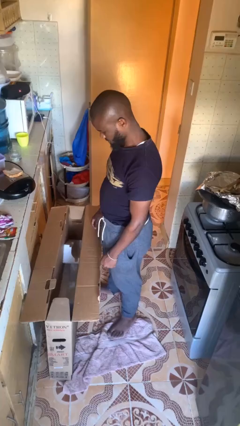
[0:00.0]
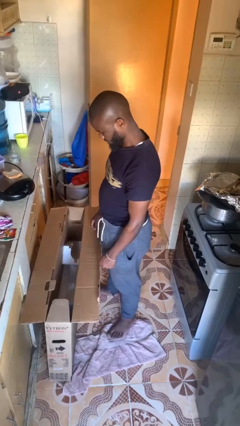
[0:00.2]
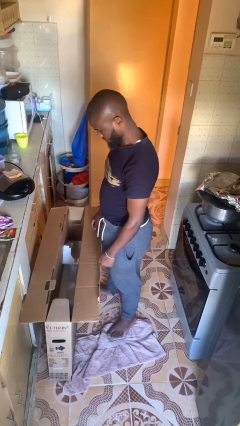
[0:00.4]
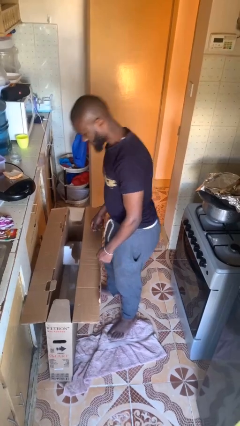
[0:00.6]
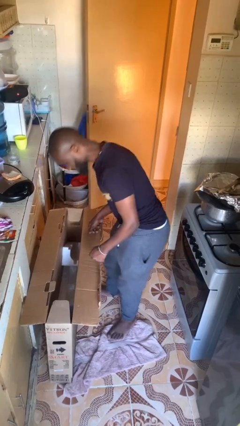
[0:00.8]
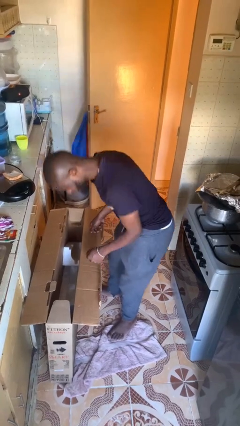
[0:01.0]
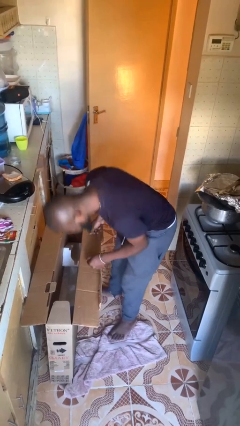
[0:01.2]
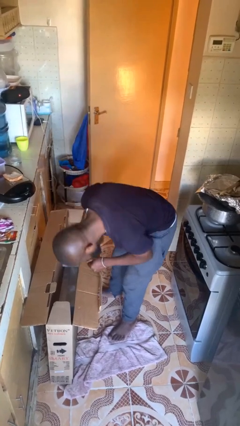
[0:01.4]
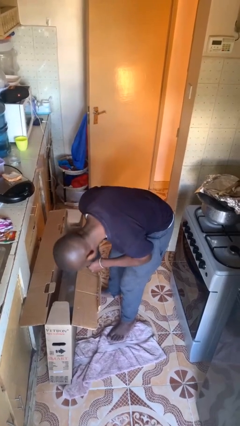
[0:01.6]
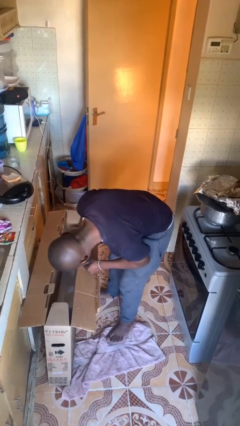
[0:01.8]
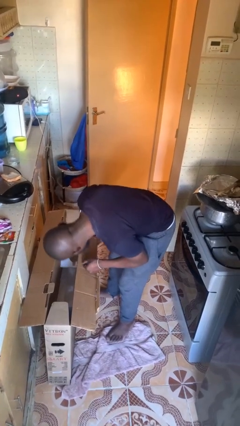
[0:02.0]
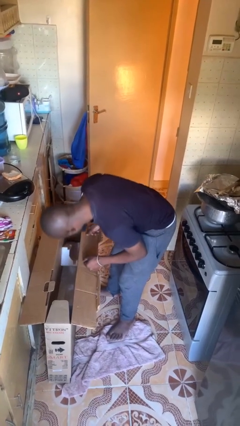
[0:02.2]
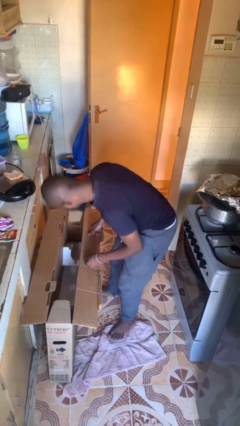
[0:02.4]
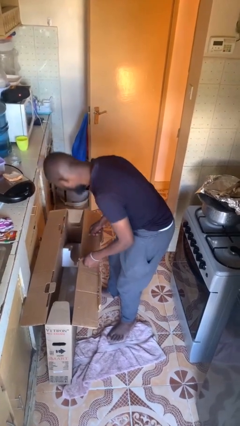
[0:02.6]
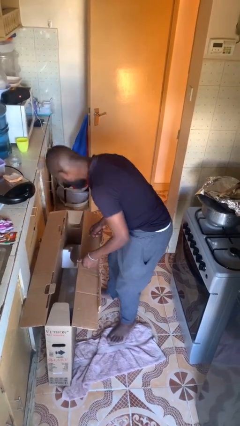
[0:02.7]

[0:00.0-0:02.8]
person searches in box

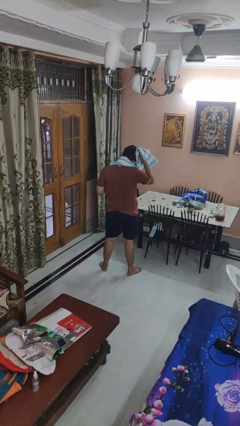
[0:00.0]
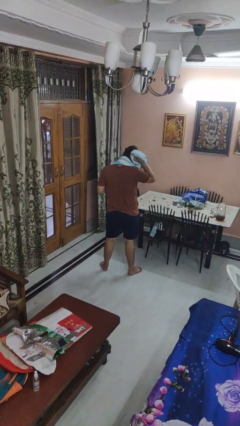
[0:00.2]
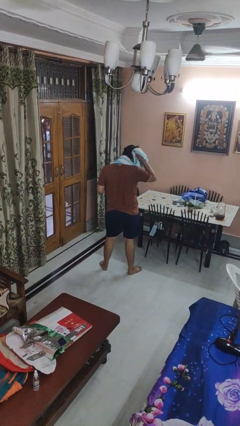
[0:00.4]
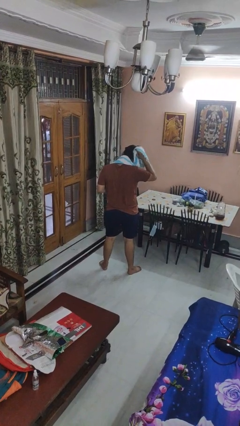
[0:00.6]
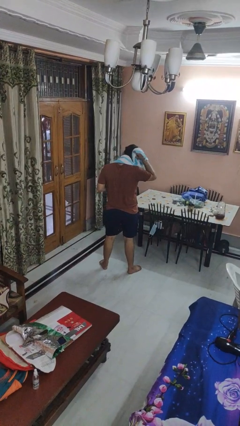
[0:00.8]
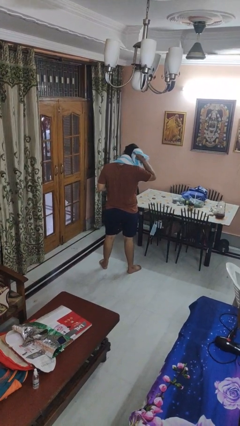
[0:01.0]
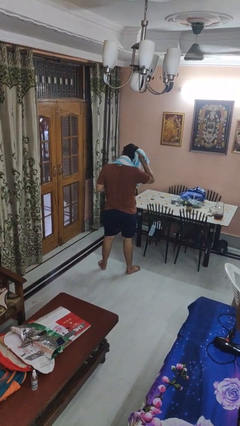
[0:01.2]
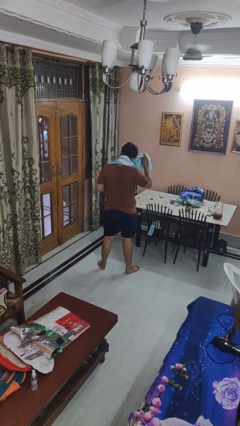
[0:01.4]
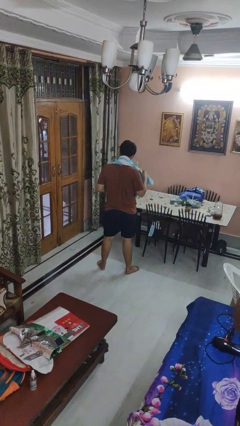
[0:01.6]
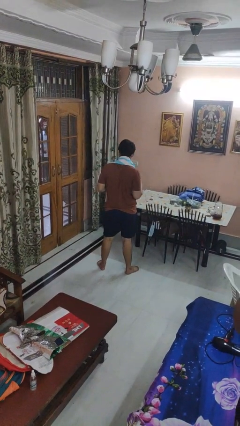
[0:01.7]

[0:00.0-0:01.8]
person dries hair with towel

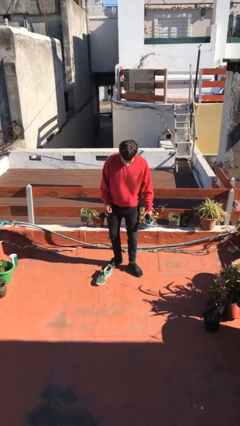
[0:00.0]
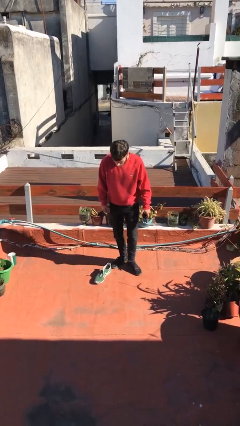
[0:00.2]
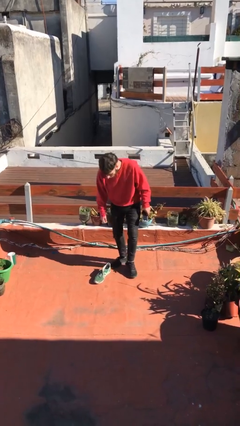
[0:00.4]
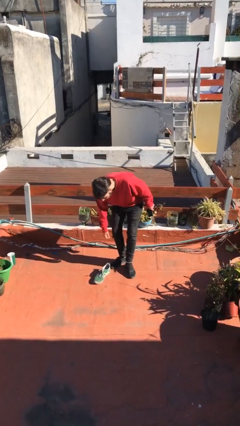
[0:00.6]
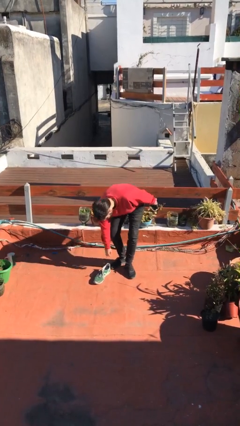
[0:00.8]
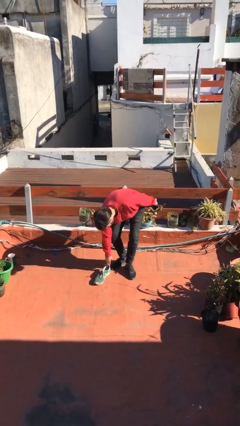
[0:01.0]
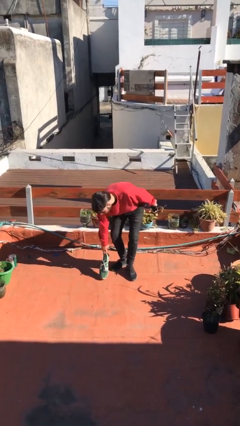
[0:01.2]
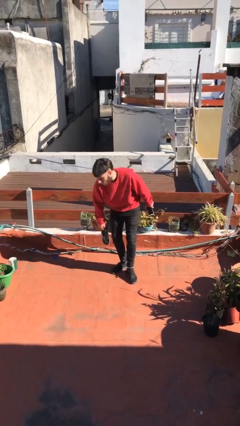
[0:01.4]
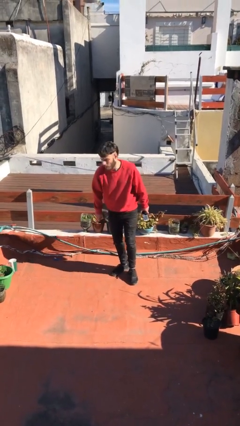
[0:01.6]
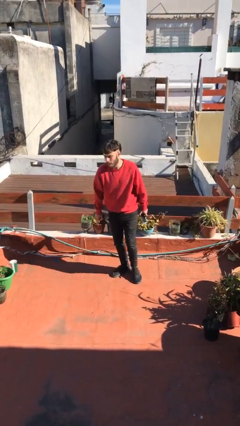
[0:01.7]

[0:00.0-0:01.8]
person picks up object from floor

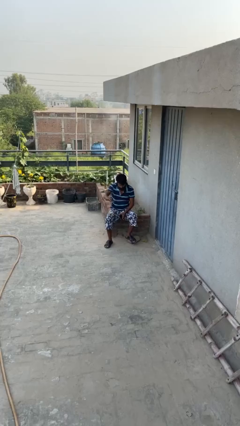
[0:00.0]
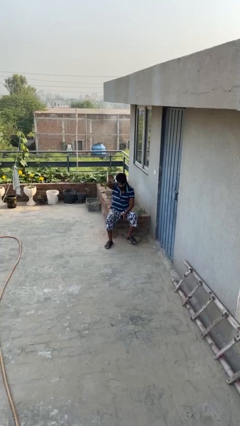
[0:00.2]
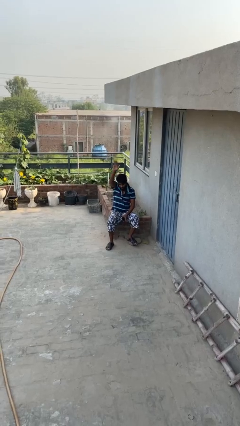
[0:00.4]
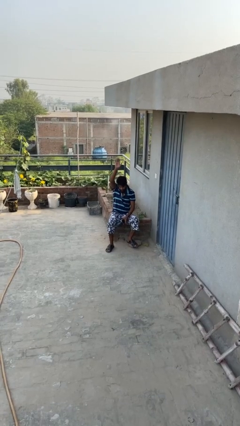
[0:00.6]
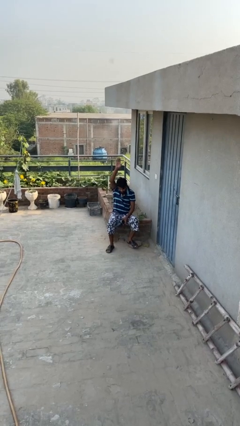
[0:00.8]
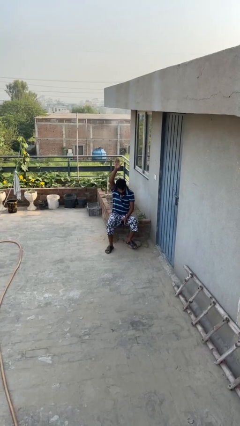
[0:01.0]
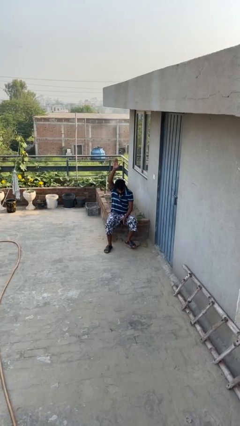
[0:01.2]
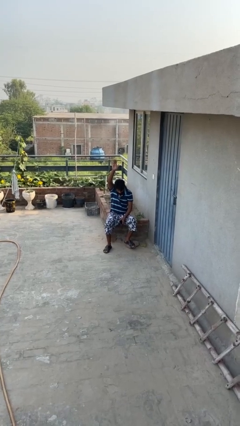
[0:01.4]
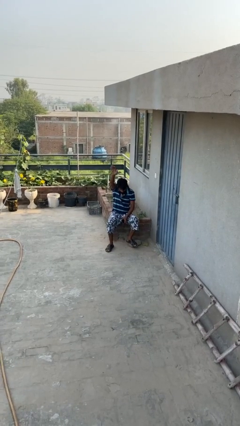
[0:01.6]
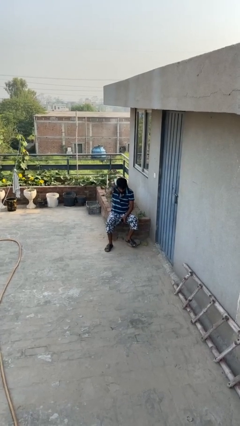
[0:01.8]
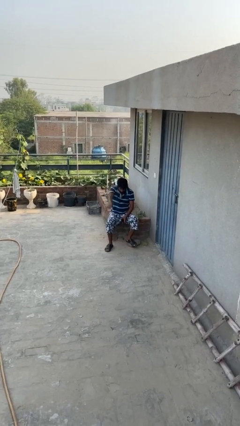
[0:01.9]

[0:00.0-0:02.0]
person gestures raise hand

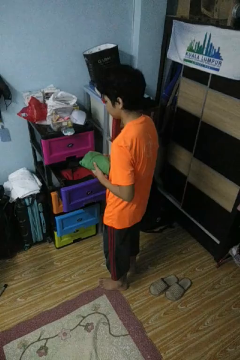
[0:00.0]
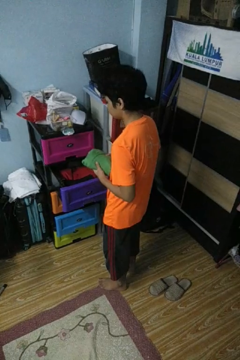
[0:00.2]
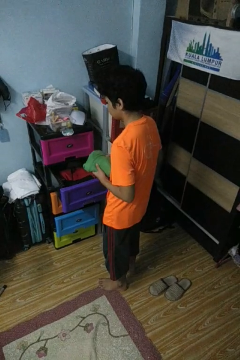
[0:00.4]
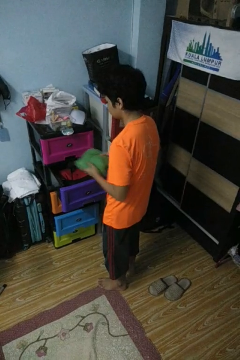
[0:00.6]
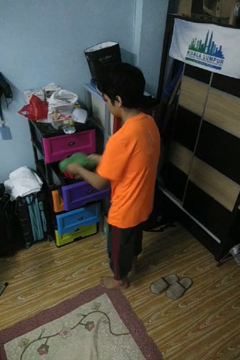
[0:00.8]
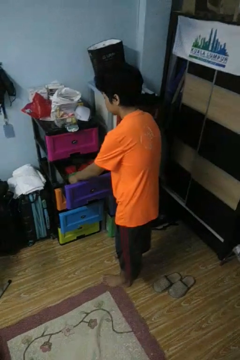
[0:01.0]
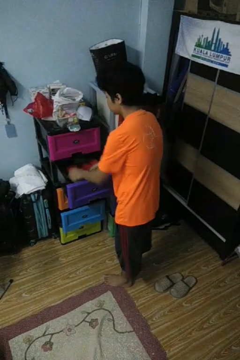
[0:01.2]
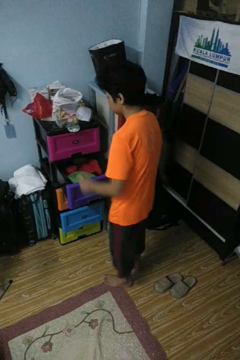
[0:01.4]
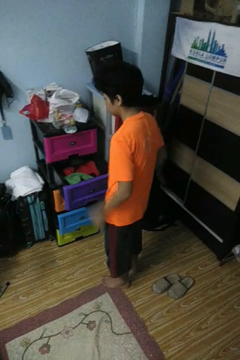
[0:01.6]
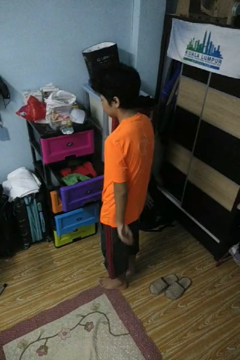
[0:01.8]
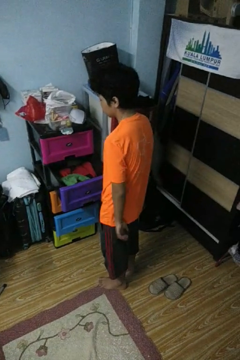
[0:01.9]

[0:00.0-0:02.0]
person puts clothes into dresser

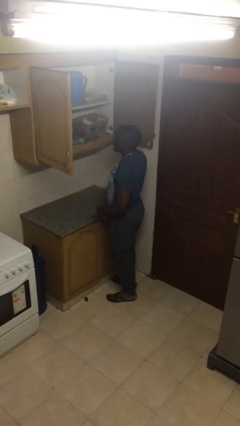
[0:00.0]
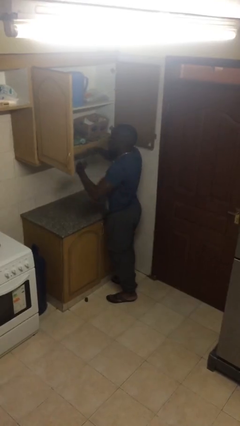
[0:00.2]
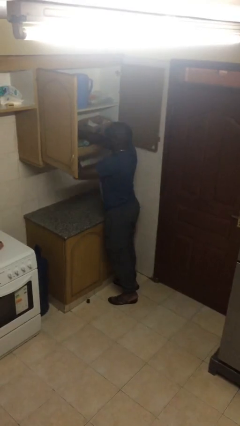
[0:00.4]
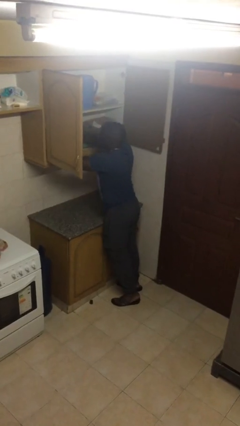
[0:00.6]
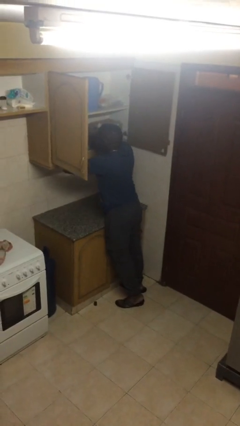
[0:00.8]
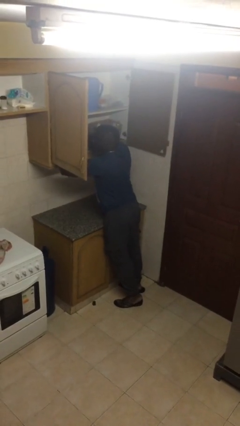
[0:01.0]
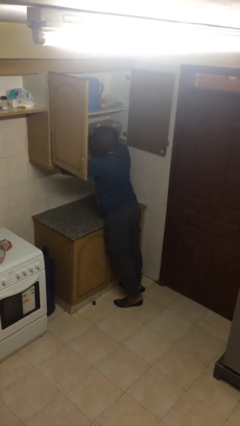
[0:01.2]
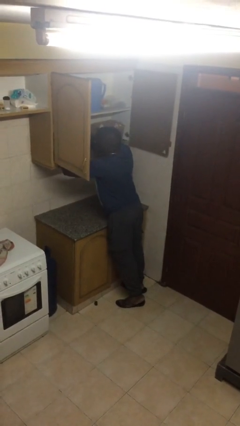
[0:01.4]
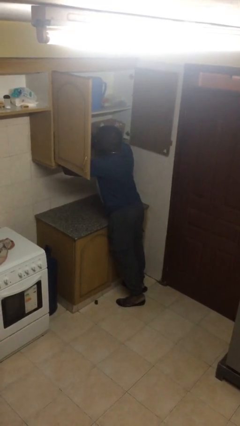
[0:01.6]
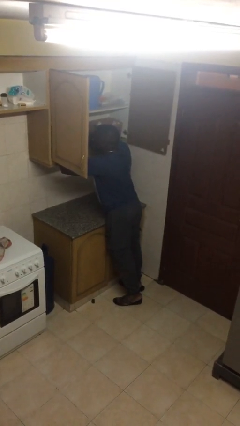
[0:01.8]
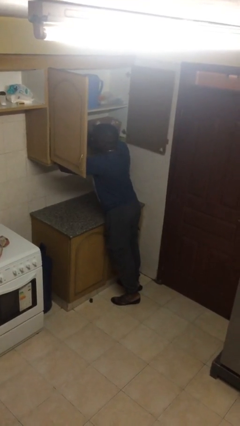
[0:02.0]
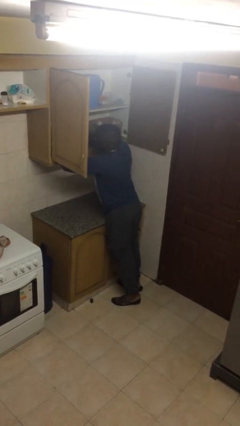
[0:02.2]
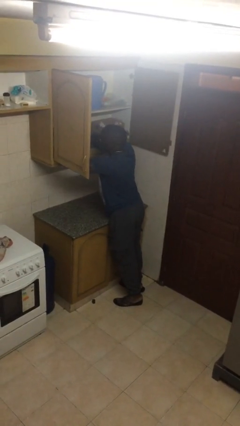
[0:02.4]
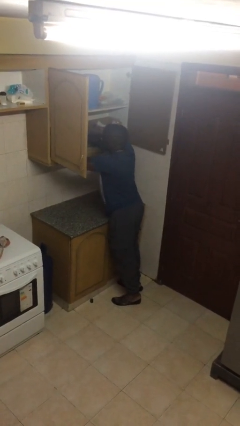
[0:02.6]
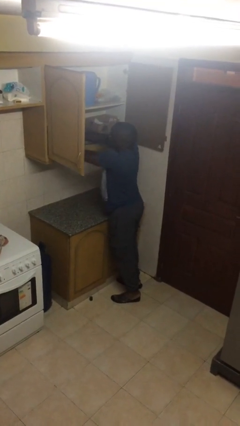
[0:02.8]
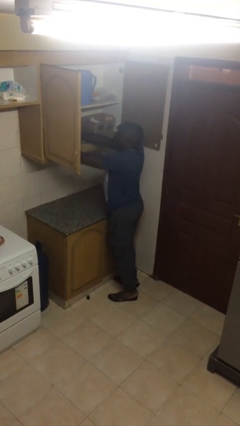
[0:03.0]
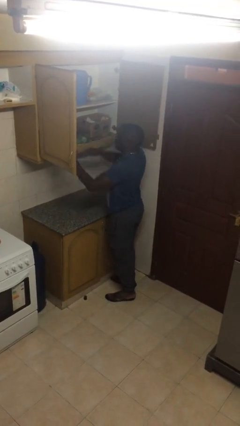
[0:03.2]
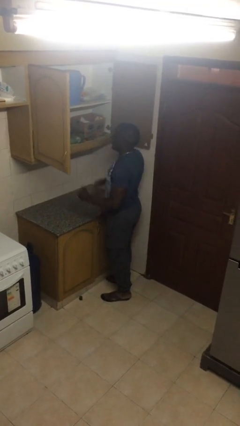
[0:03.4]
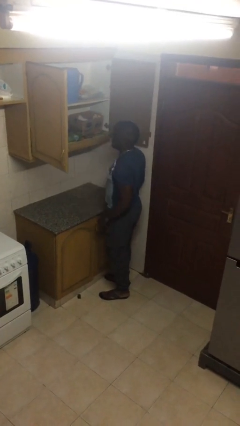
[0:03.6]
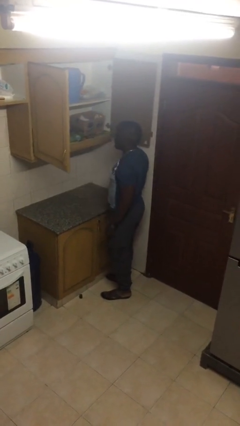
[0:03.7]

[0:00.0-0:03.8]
person searches in cabinet

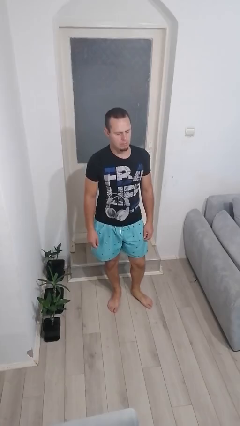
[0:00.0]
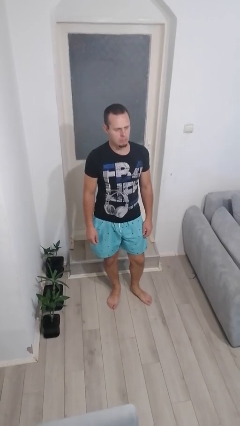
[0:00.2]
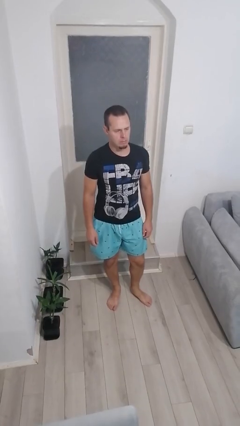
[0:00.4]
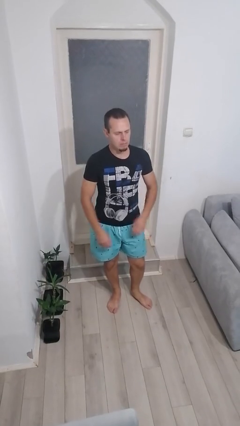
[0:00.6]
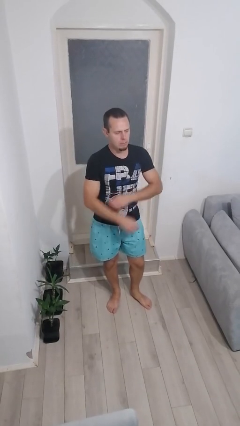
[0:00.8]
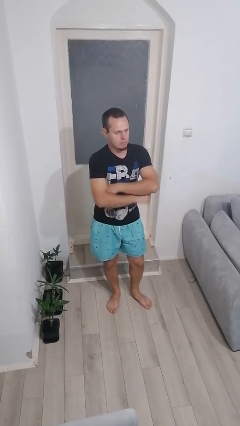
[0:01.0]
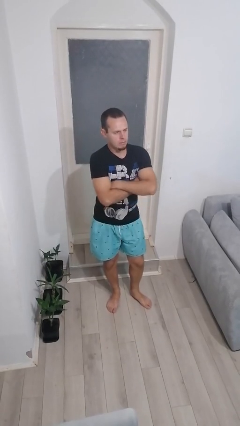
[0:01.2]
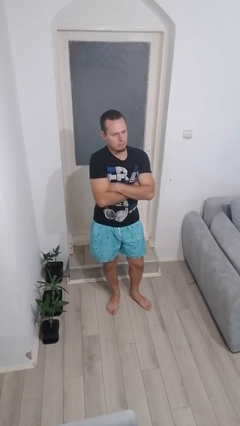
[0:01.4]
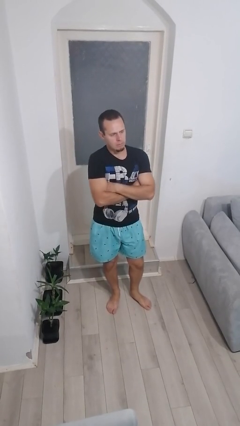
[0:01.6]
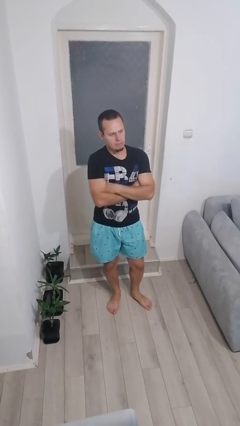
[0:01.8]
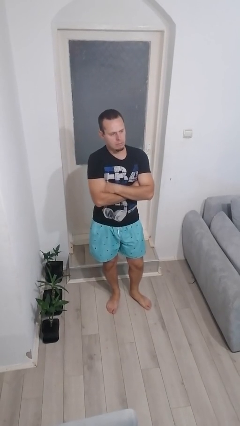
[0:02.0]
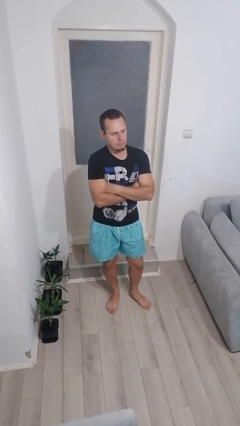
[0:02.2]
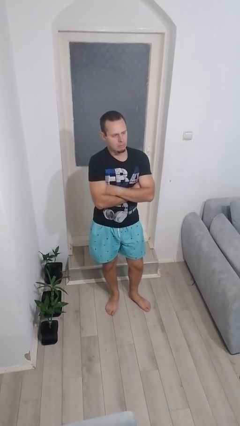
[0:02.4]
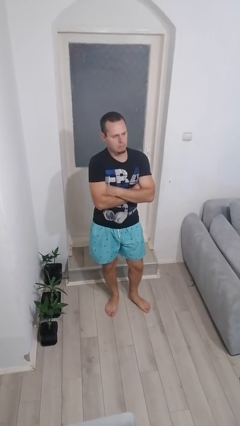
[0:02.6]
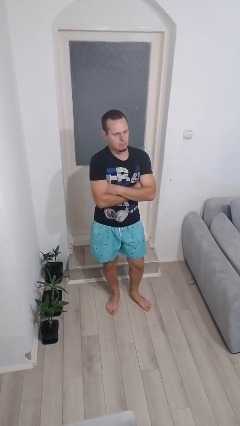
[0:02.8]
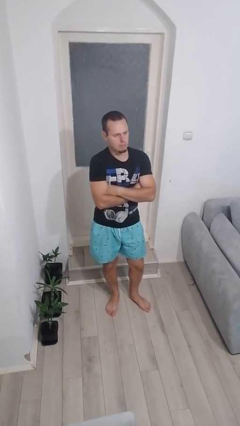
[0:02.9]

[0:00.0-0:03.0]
person crosses arms
